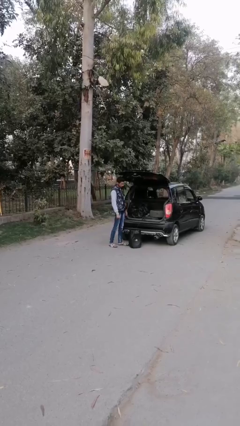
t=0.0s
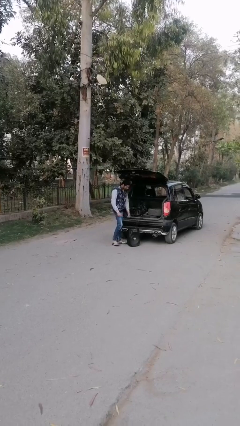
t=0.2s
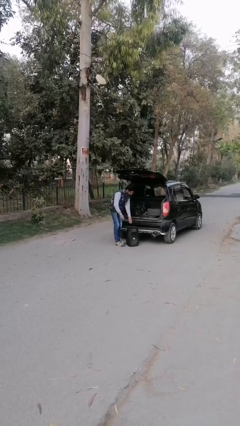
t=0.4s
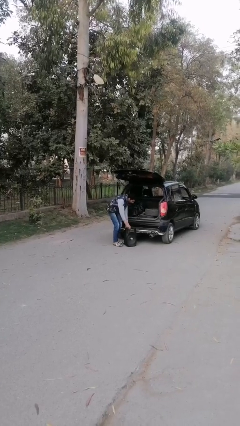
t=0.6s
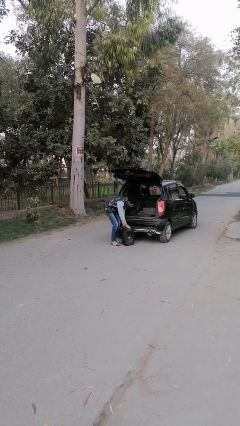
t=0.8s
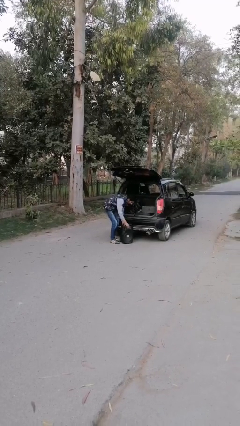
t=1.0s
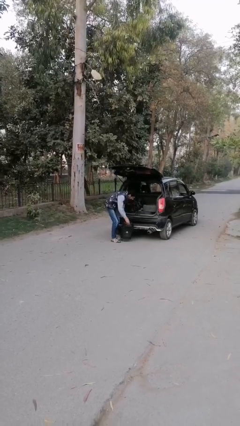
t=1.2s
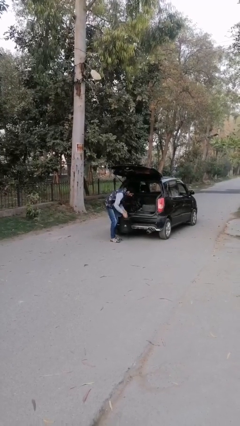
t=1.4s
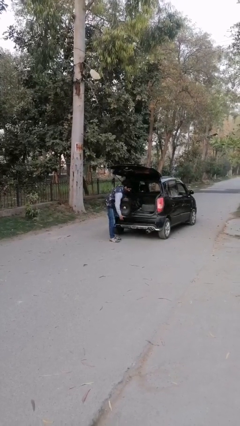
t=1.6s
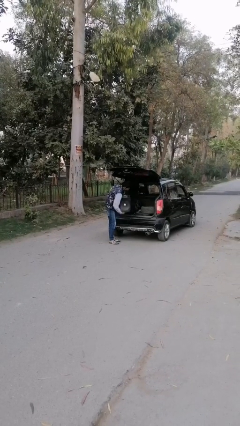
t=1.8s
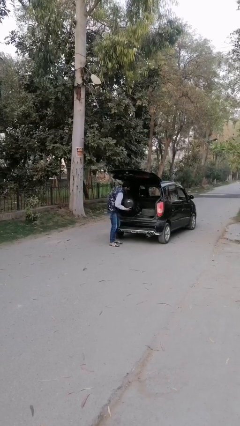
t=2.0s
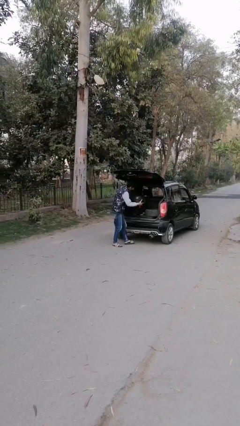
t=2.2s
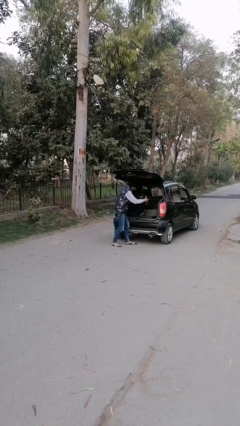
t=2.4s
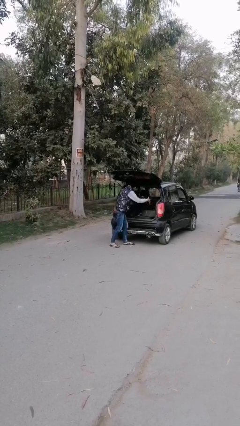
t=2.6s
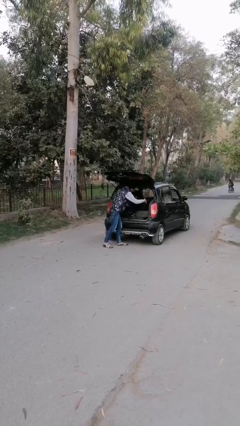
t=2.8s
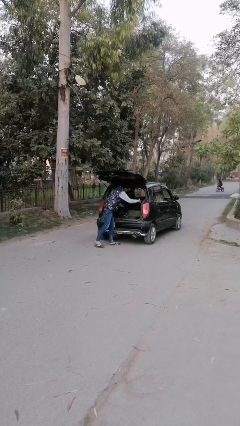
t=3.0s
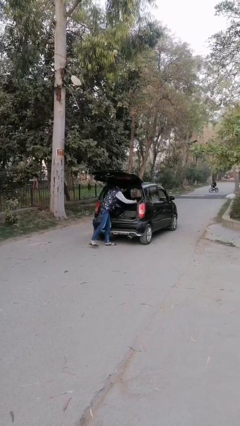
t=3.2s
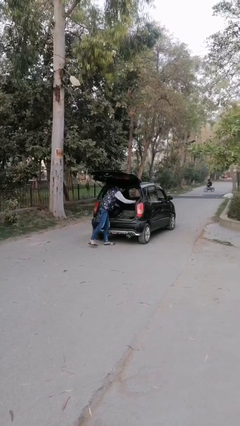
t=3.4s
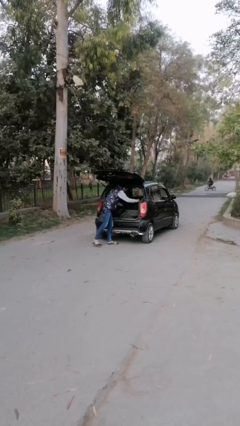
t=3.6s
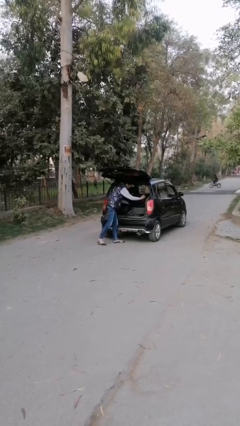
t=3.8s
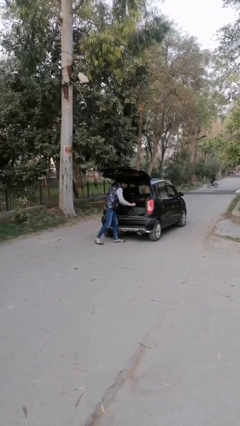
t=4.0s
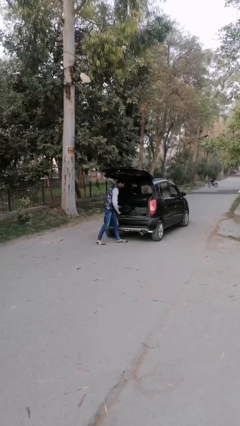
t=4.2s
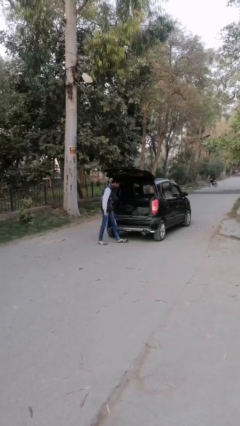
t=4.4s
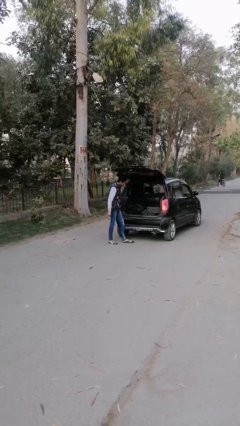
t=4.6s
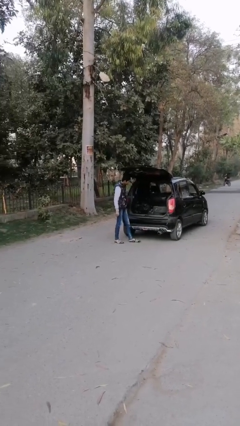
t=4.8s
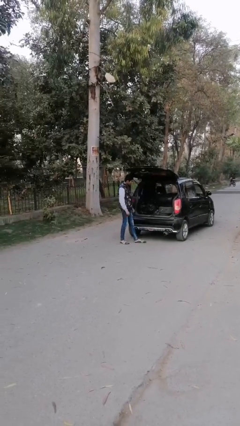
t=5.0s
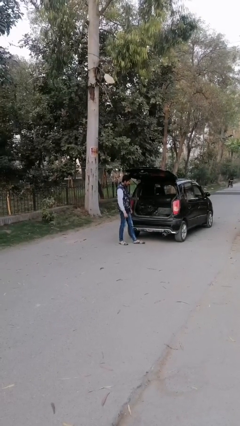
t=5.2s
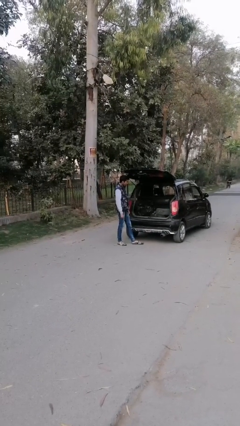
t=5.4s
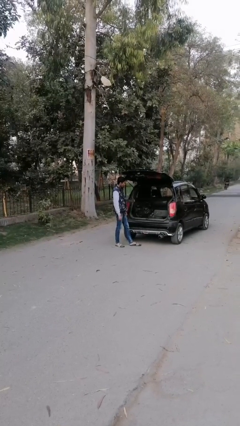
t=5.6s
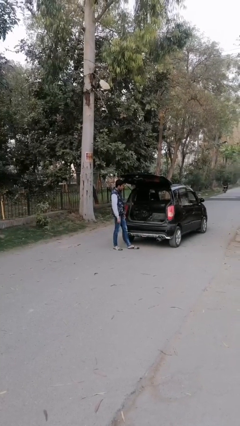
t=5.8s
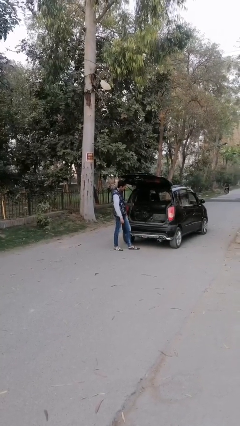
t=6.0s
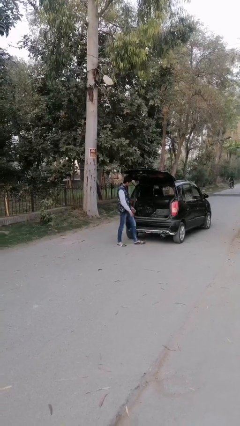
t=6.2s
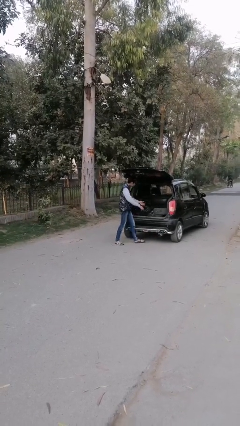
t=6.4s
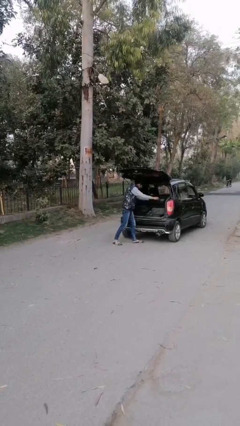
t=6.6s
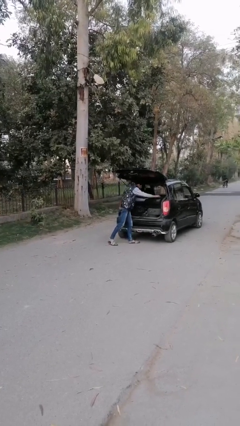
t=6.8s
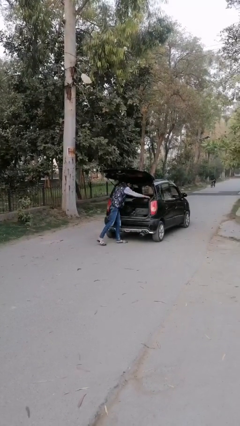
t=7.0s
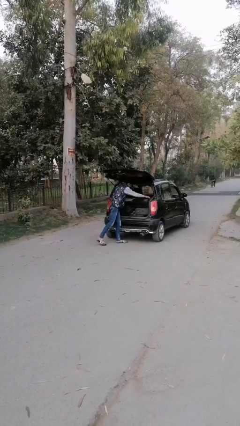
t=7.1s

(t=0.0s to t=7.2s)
person loads car

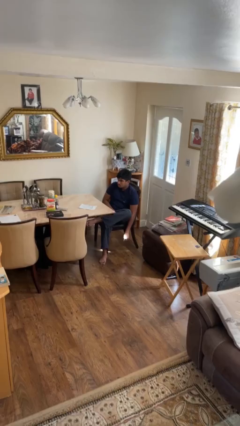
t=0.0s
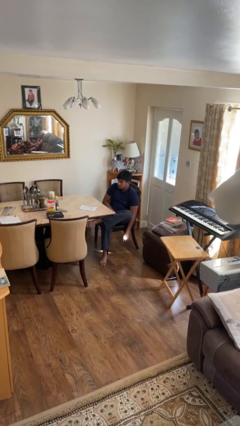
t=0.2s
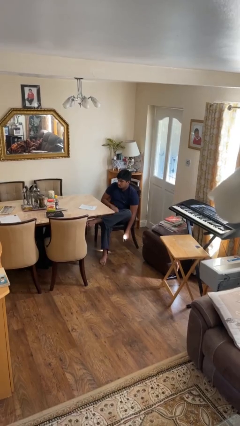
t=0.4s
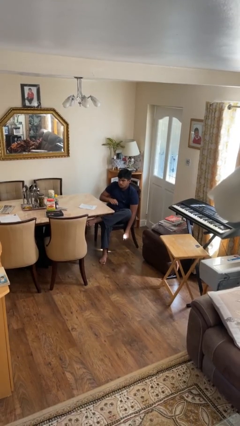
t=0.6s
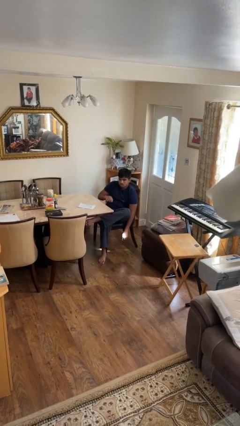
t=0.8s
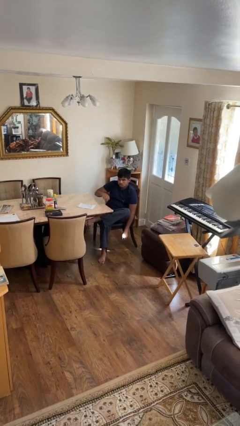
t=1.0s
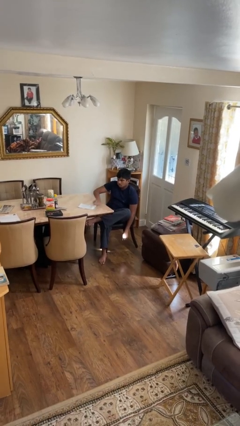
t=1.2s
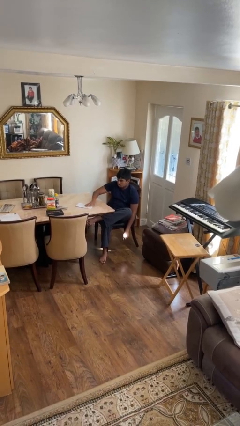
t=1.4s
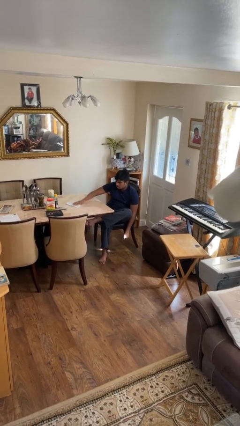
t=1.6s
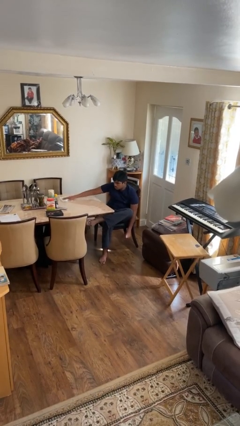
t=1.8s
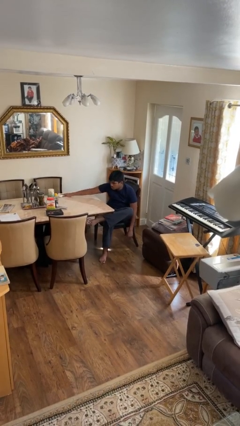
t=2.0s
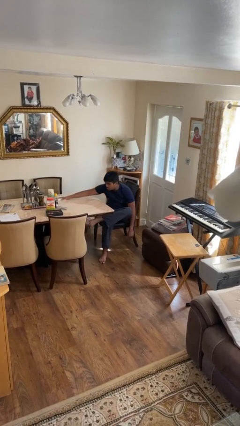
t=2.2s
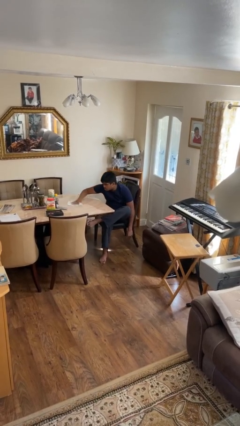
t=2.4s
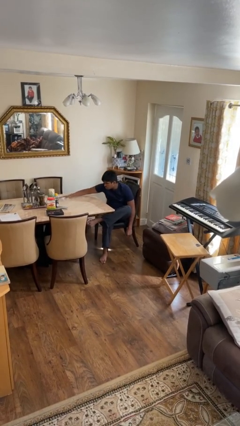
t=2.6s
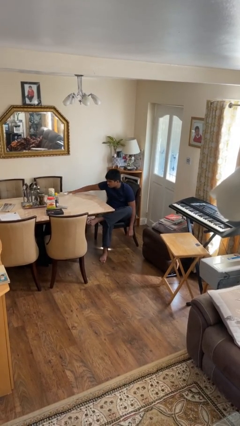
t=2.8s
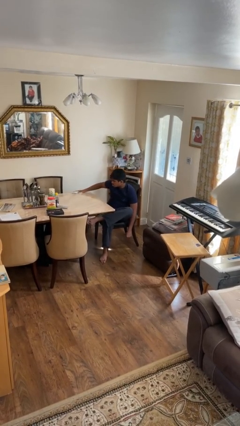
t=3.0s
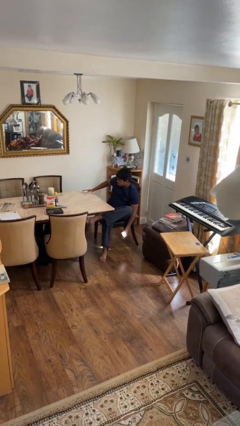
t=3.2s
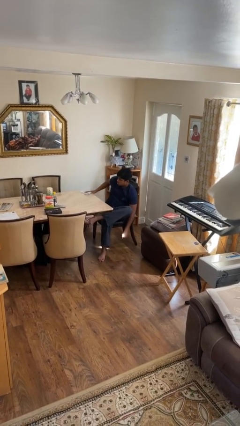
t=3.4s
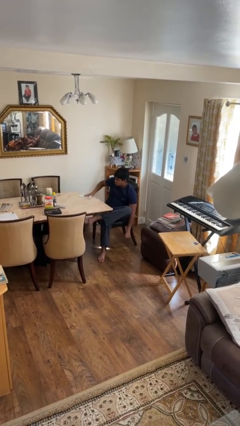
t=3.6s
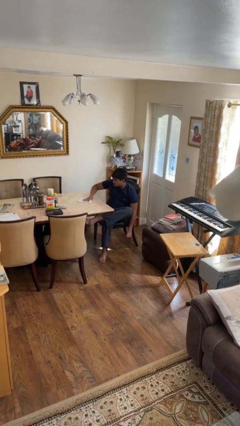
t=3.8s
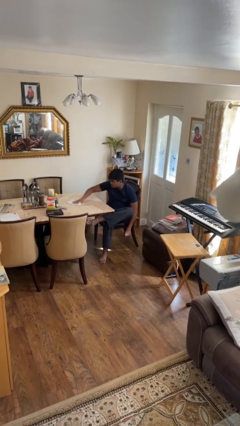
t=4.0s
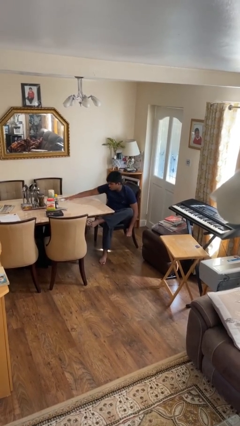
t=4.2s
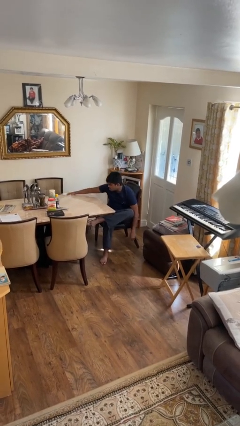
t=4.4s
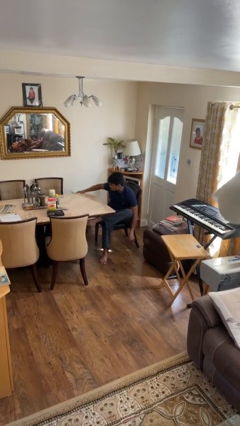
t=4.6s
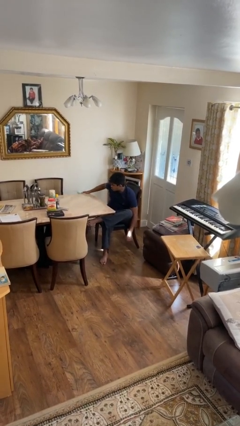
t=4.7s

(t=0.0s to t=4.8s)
person cleans table with rag

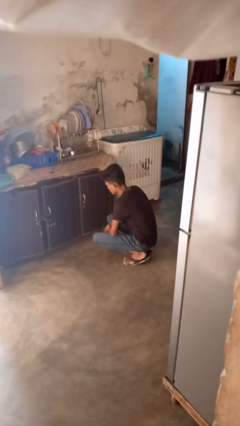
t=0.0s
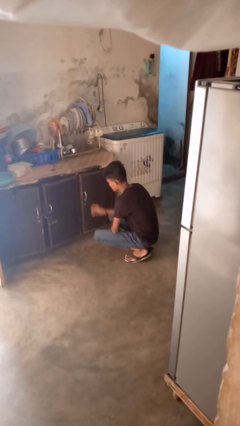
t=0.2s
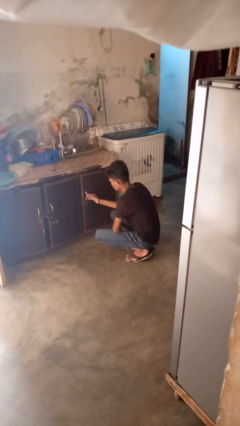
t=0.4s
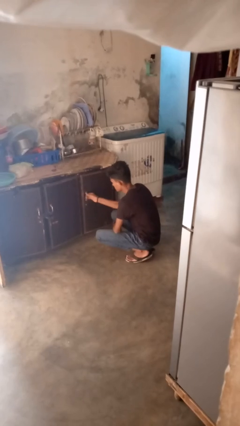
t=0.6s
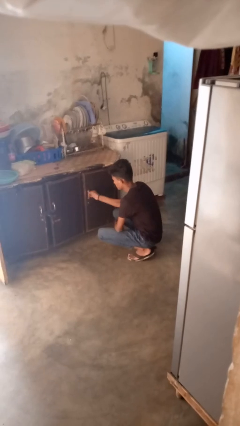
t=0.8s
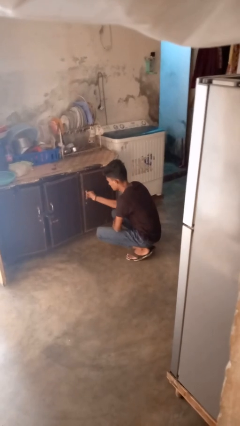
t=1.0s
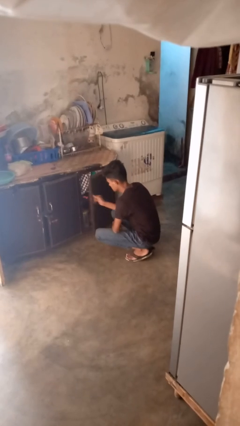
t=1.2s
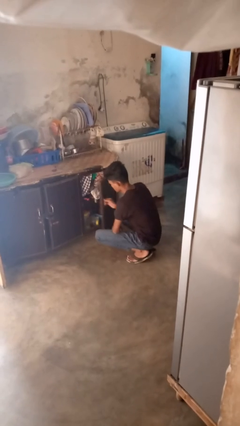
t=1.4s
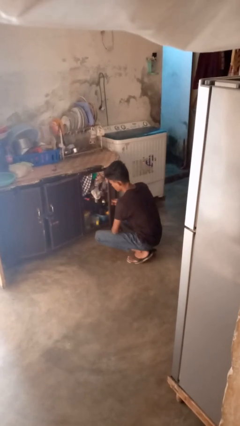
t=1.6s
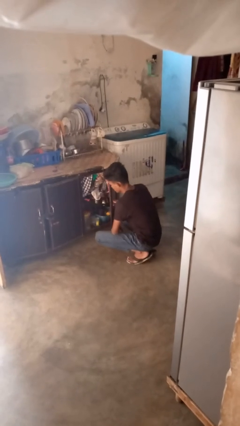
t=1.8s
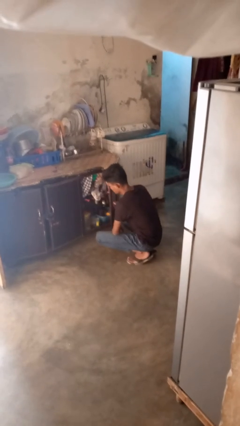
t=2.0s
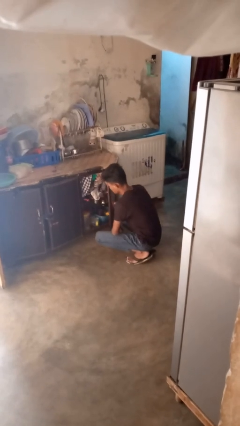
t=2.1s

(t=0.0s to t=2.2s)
person opens cabinet

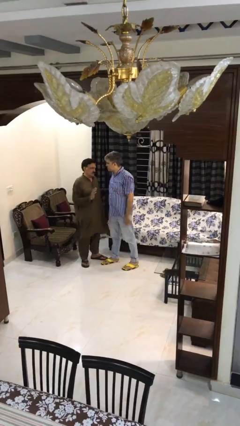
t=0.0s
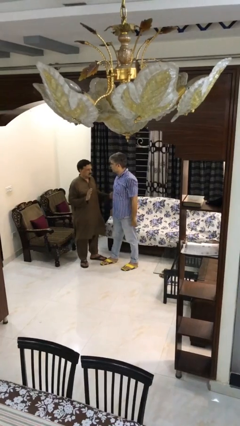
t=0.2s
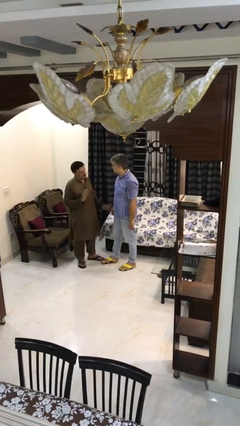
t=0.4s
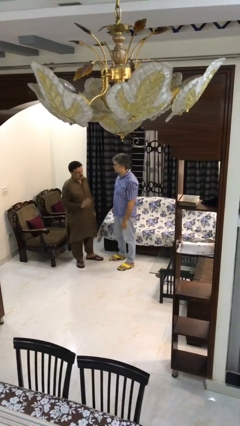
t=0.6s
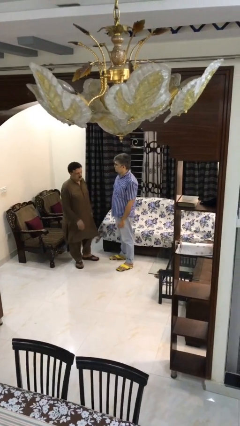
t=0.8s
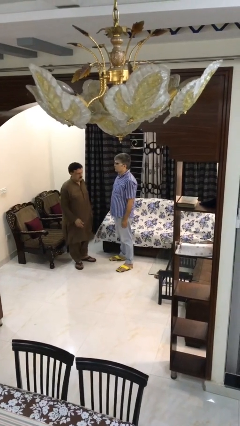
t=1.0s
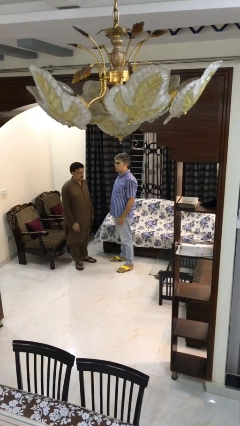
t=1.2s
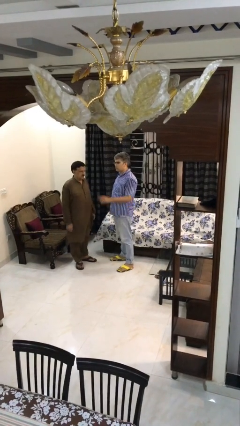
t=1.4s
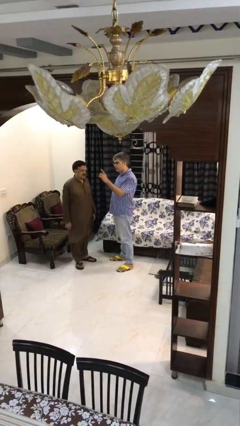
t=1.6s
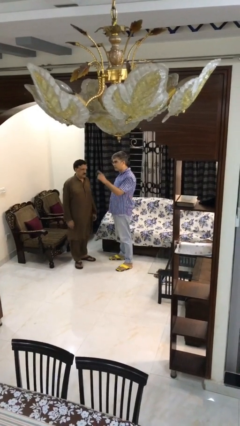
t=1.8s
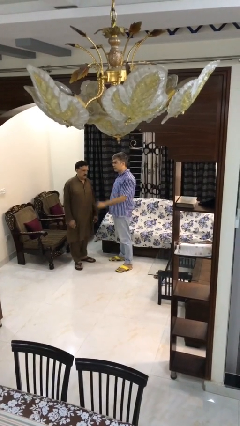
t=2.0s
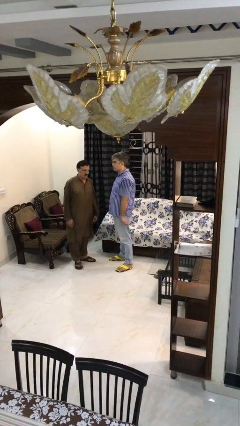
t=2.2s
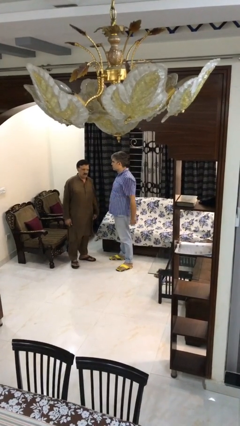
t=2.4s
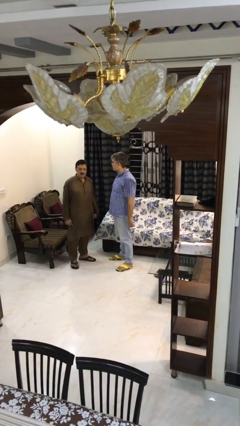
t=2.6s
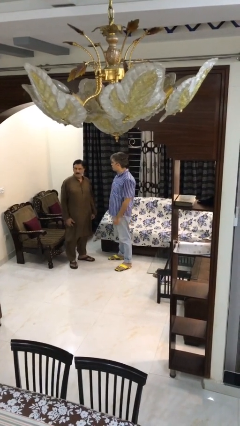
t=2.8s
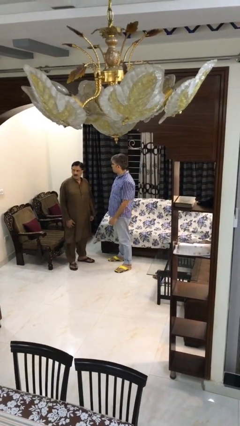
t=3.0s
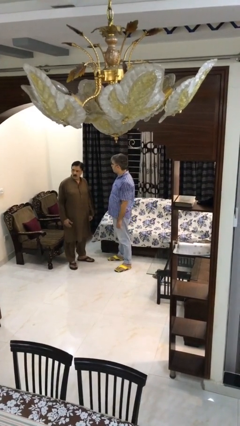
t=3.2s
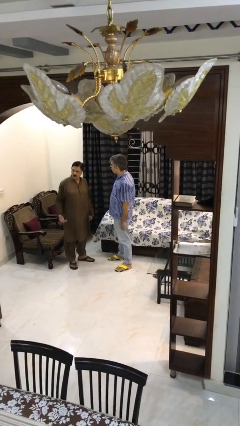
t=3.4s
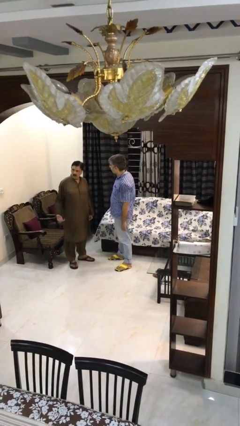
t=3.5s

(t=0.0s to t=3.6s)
person talks to person

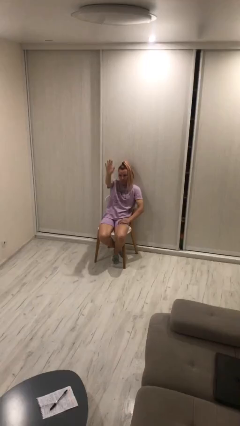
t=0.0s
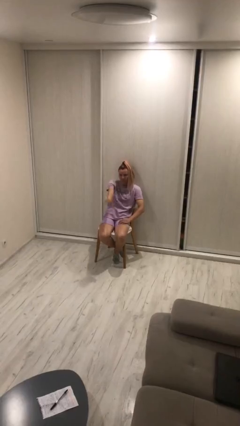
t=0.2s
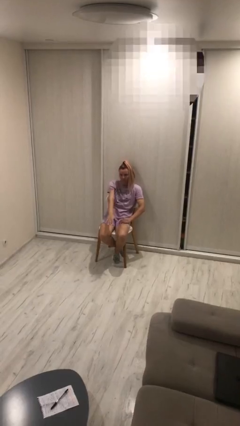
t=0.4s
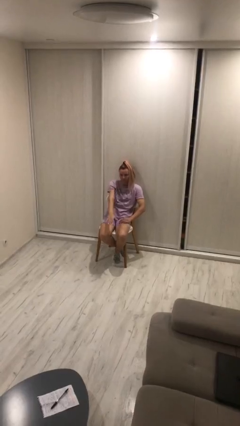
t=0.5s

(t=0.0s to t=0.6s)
person gestures swipe down
